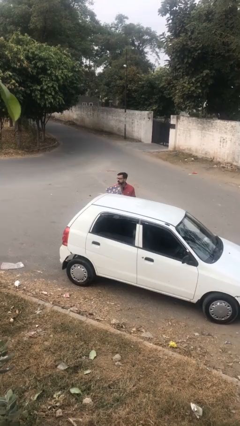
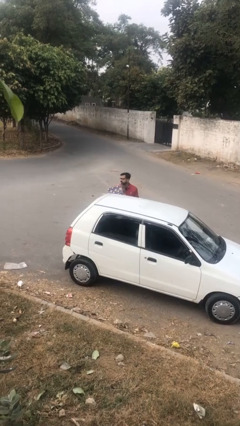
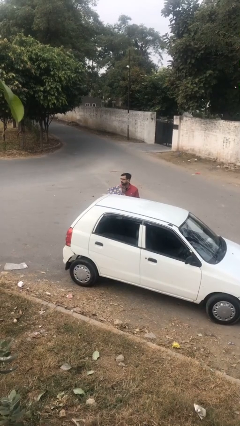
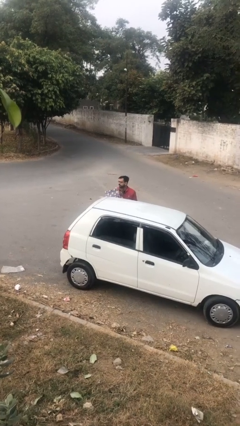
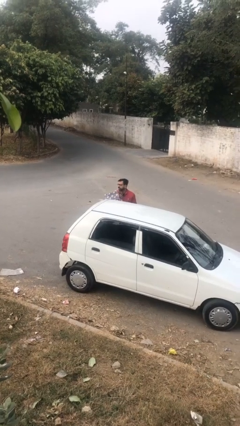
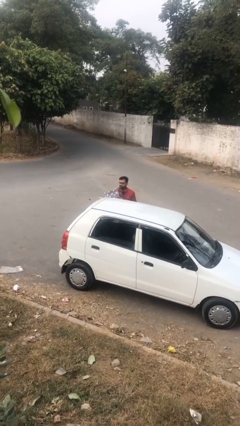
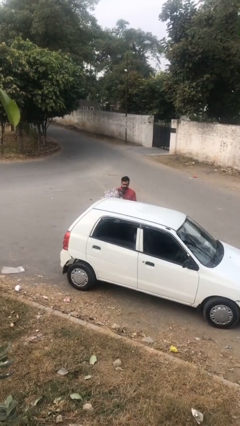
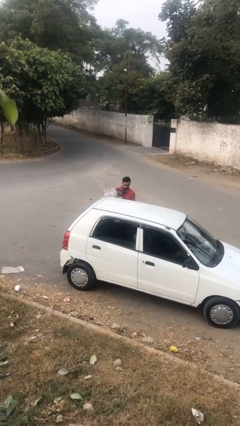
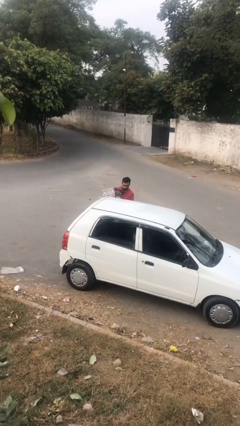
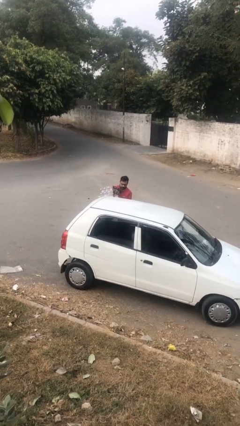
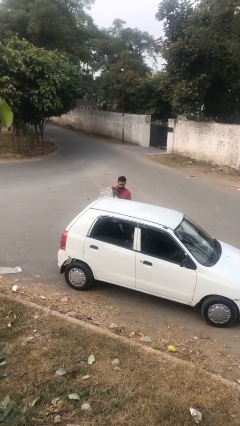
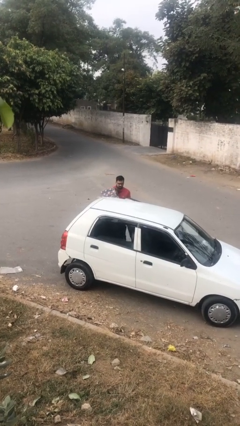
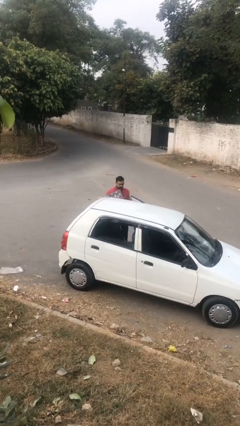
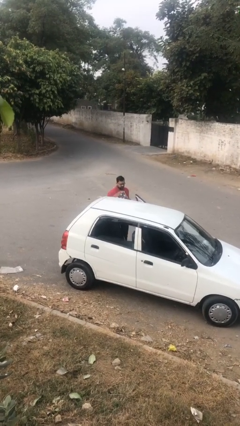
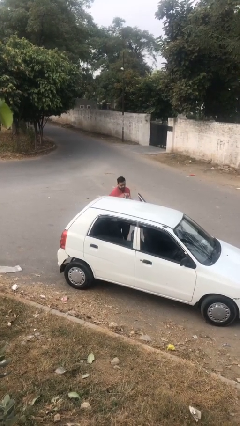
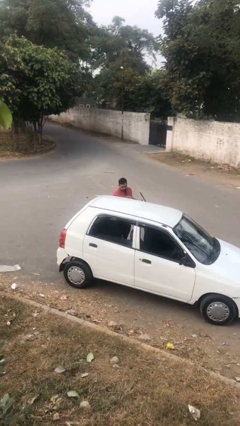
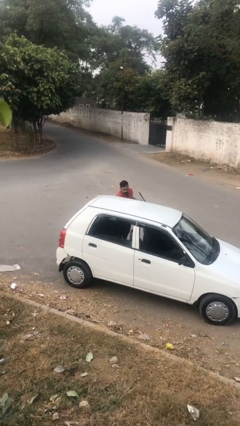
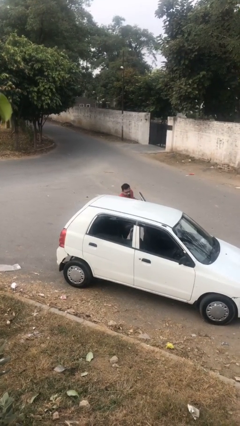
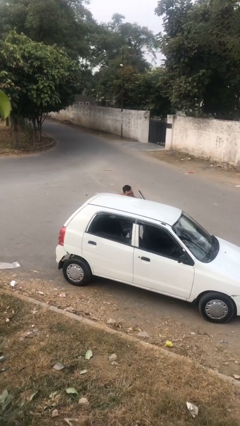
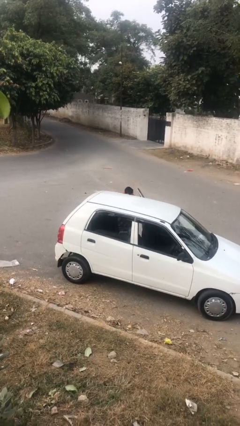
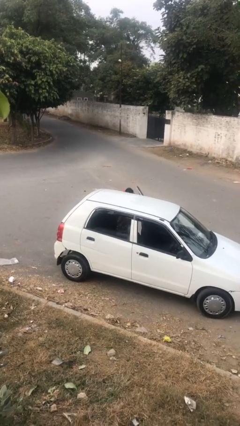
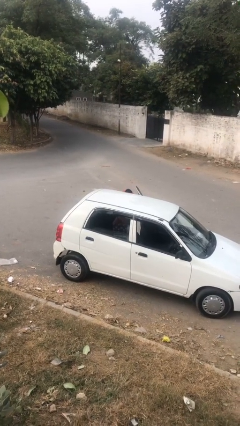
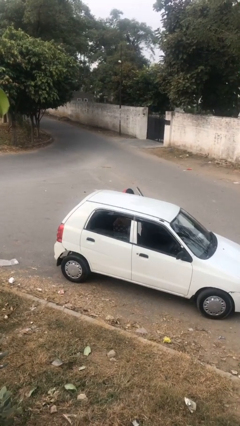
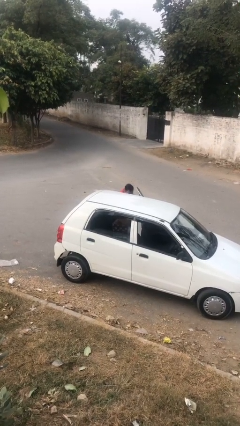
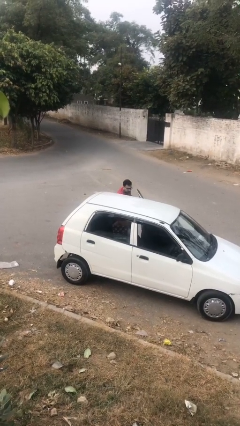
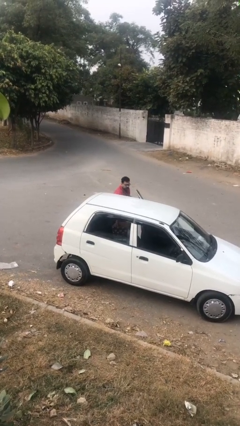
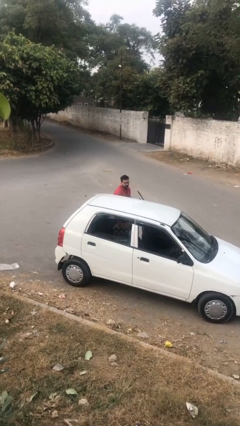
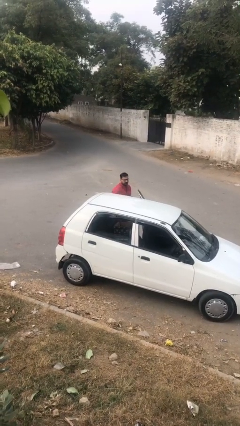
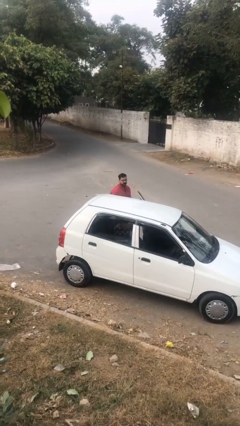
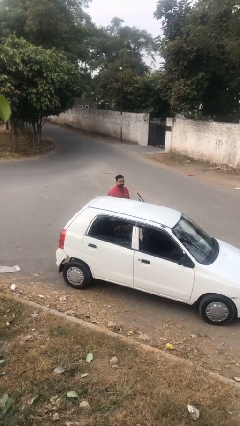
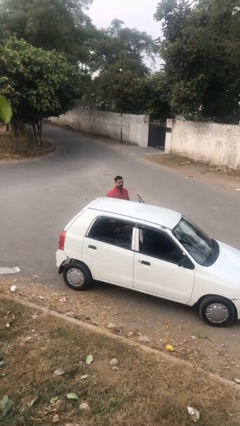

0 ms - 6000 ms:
person loads car

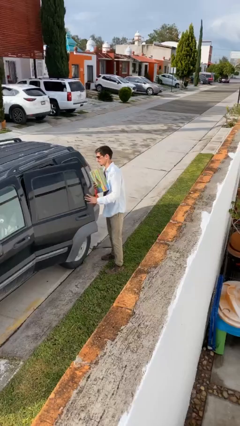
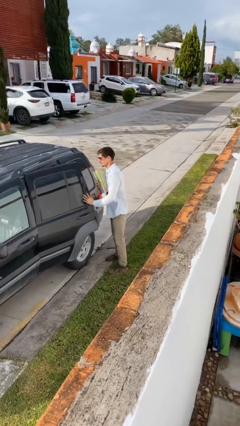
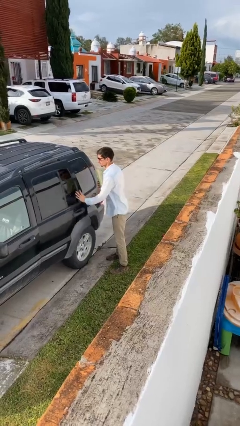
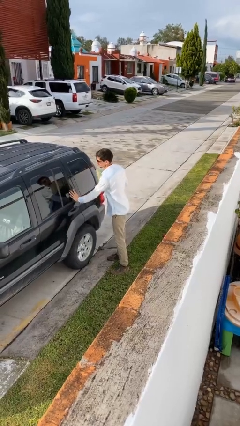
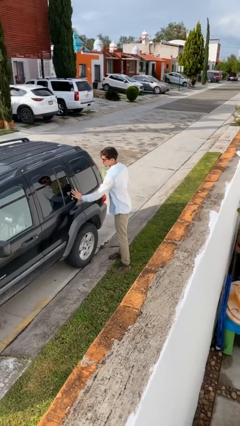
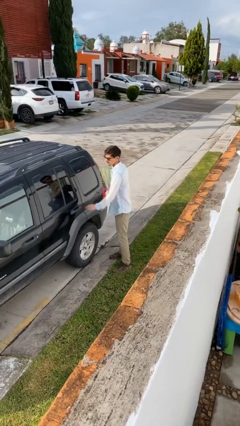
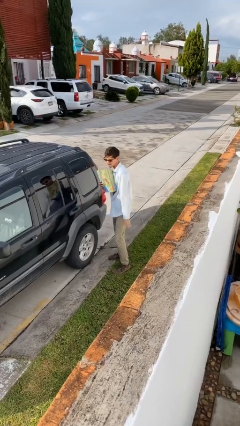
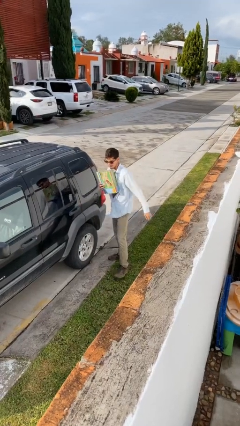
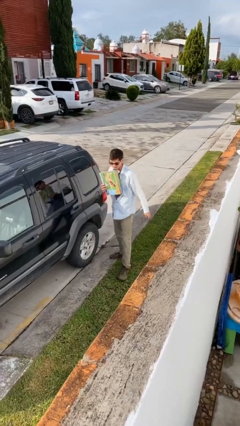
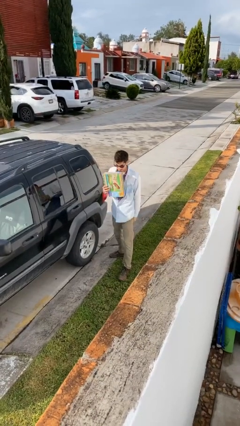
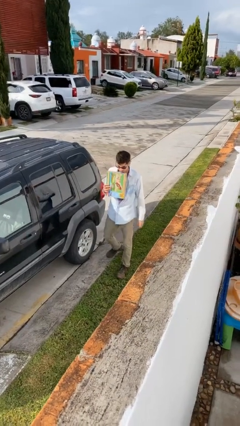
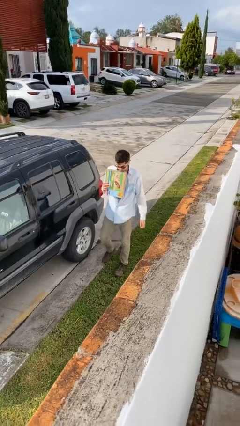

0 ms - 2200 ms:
person closes car door

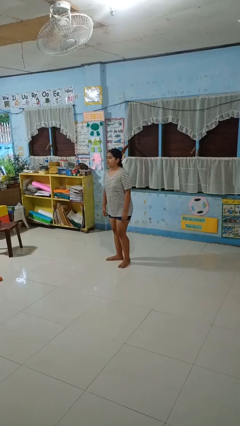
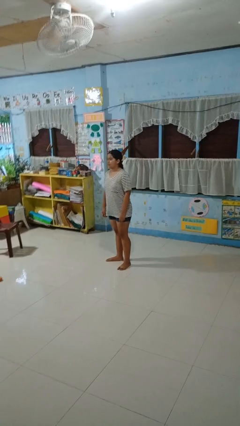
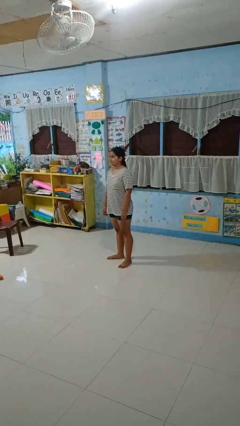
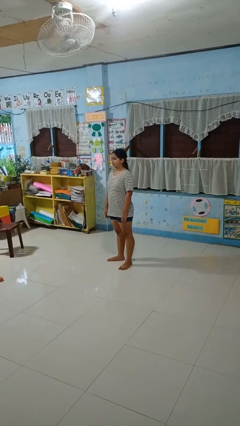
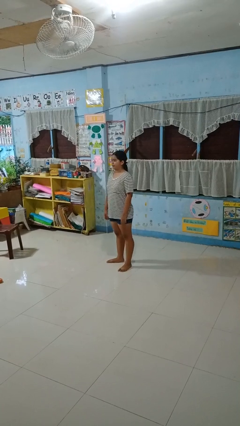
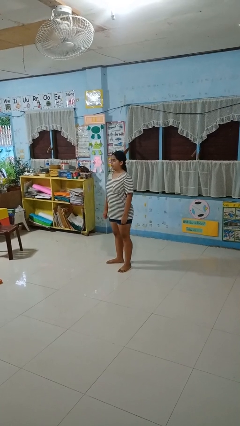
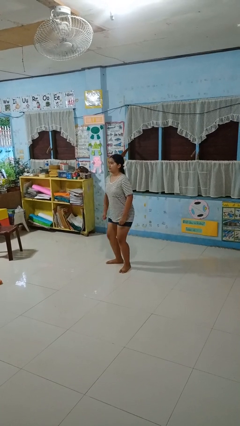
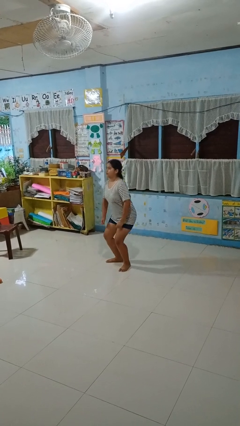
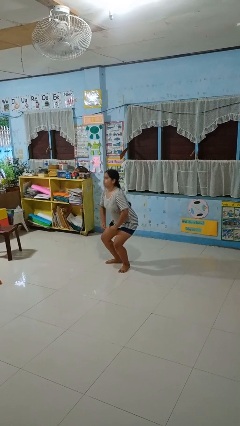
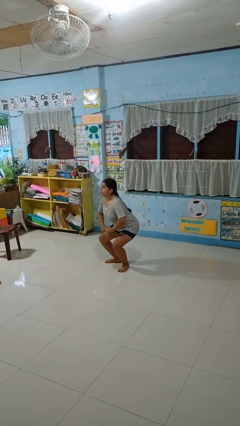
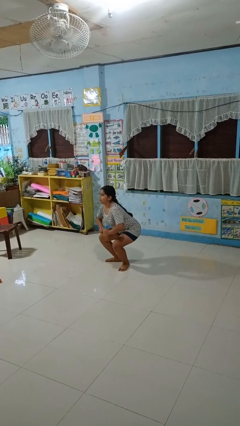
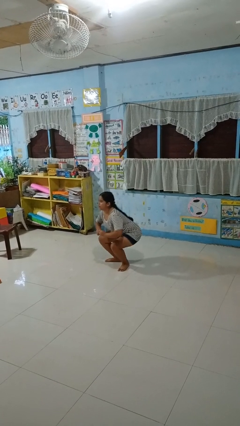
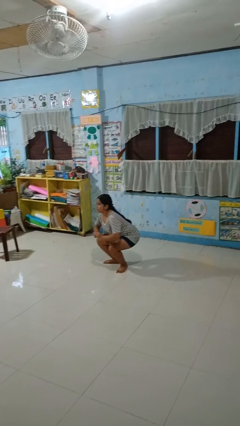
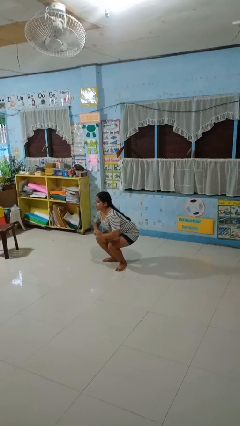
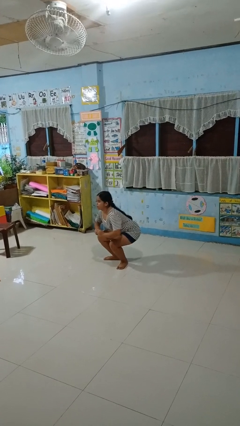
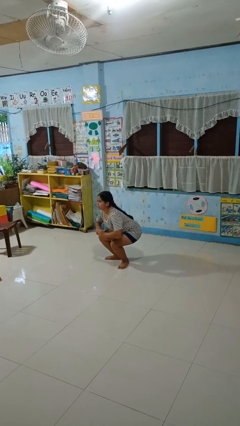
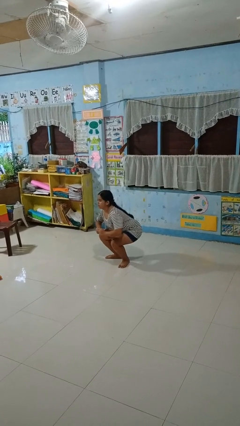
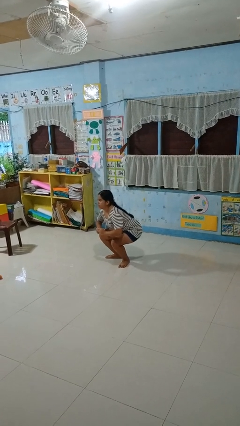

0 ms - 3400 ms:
person squats

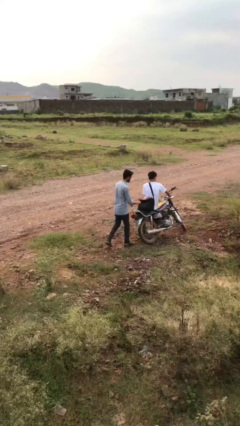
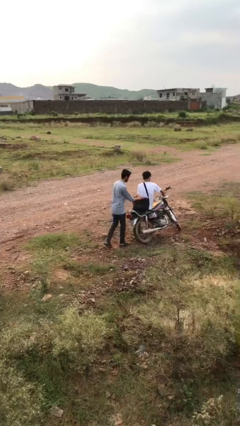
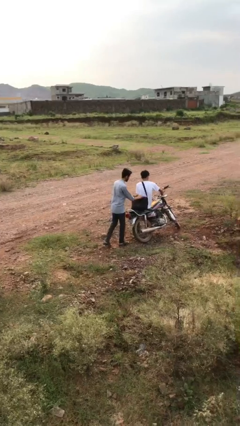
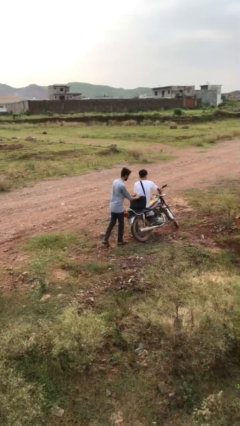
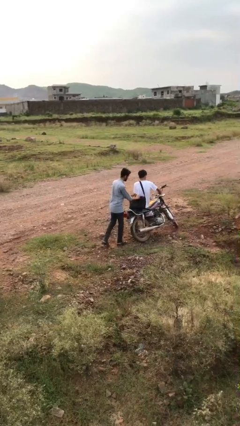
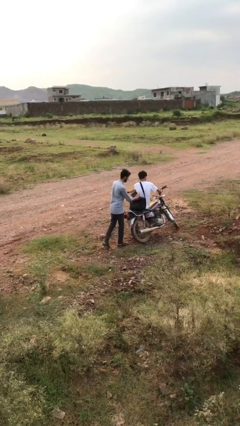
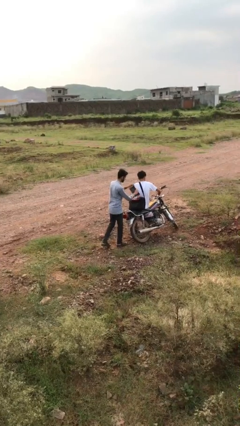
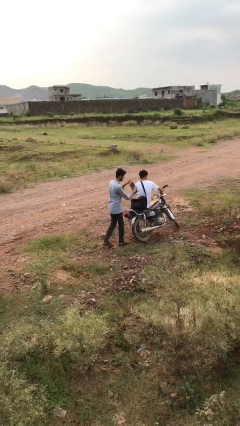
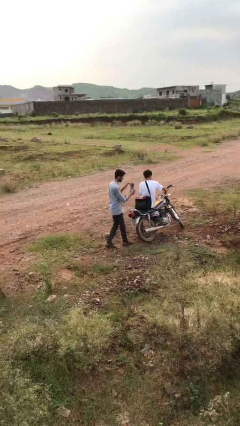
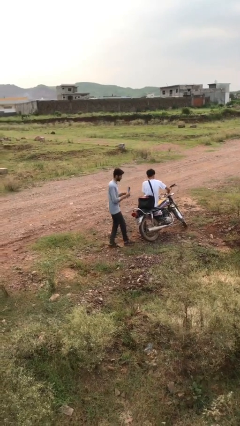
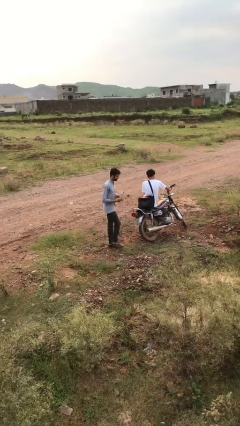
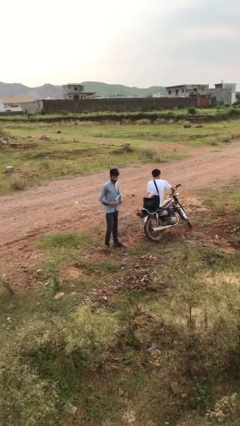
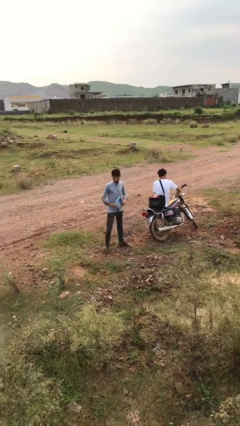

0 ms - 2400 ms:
person steals object from person

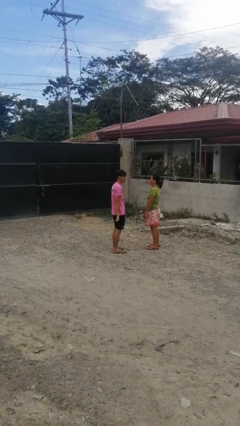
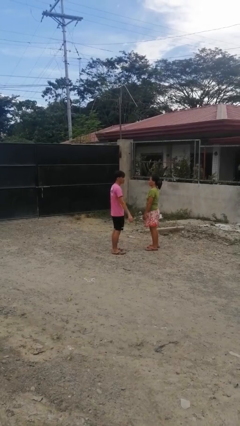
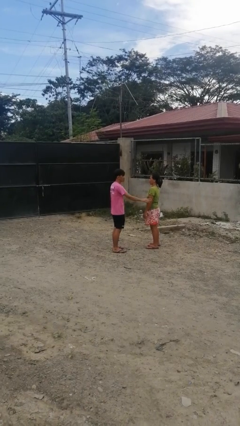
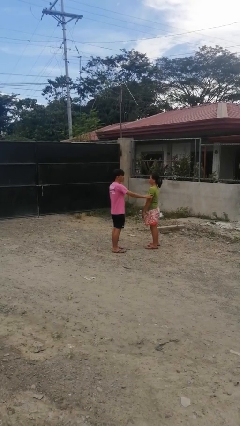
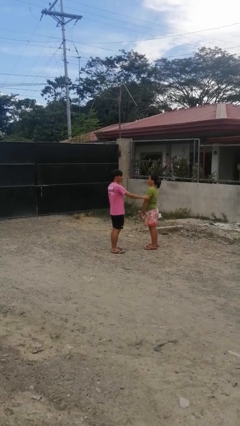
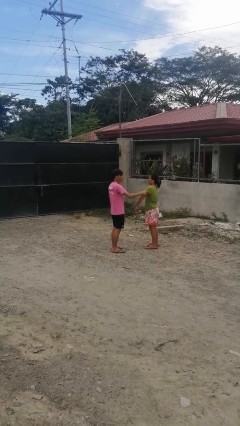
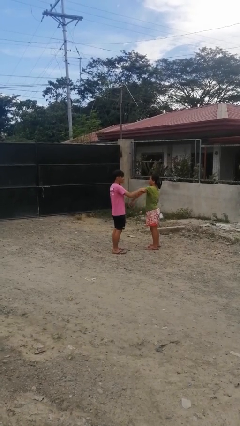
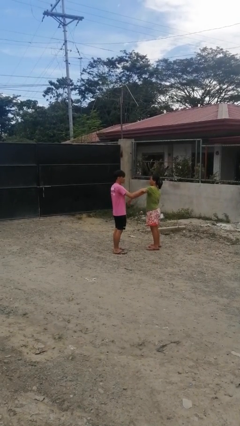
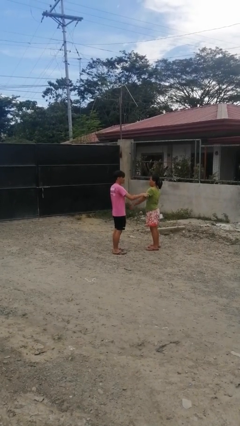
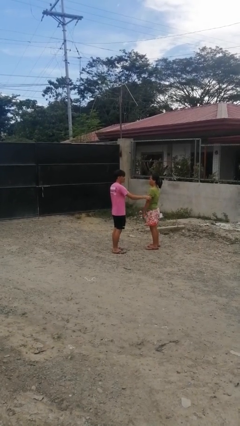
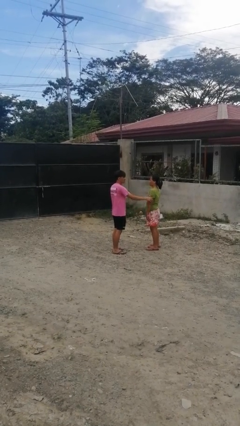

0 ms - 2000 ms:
person grabs person by bicep

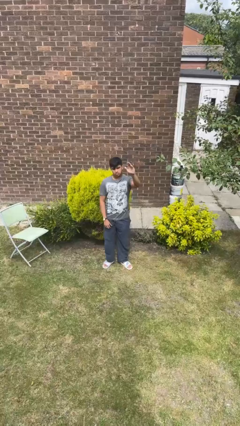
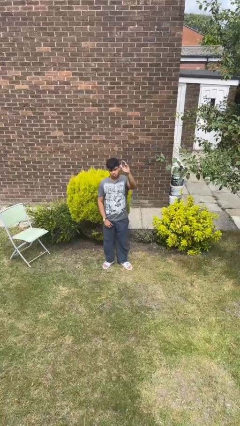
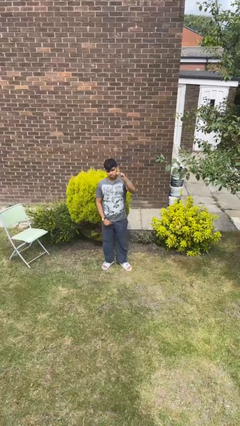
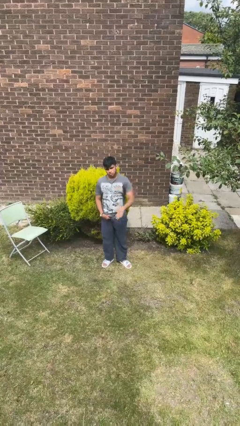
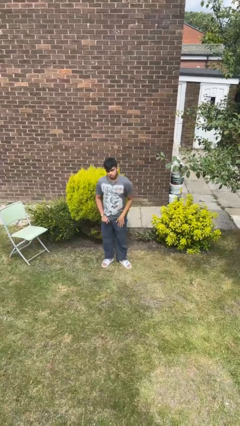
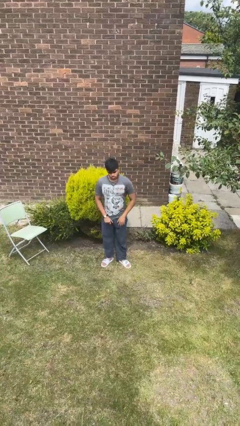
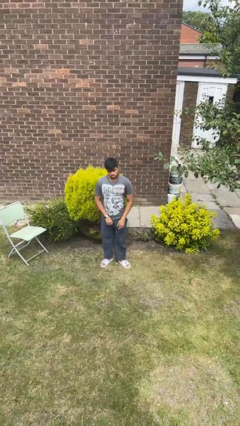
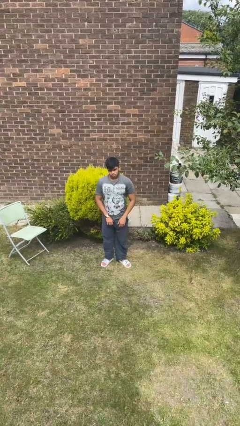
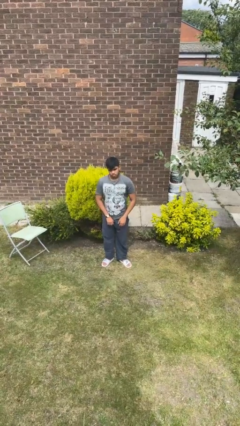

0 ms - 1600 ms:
person gestures lower hand
